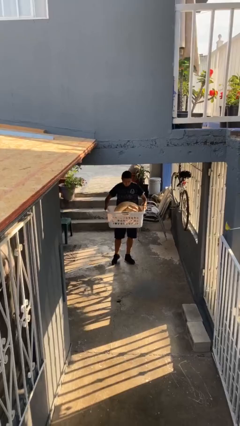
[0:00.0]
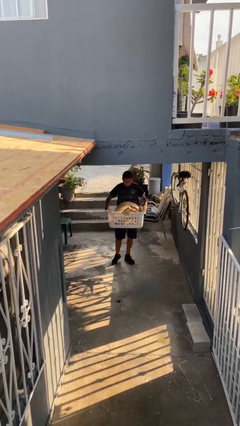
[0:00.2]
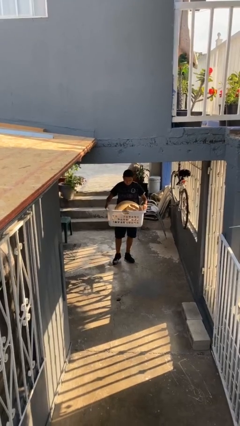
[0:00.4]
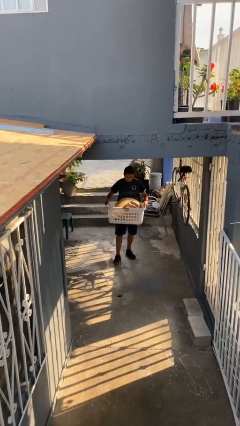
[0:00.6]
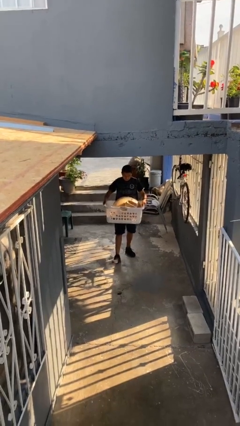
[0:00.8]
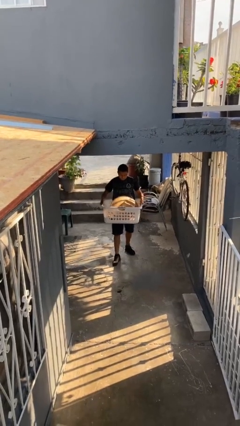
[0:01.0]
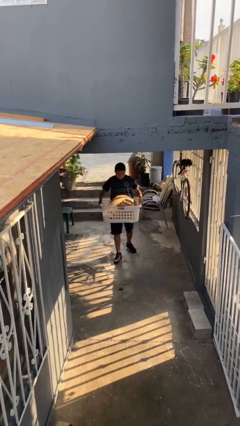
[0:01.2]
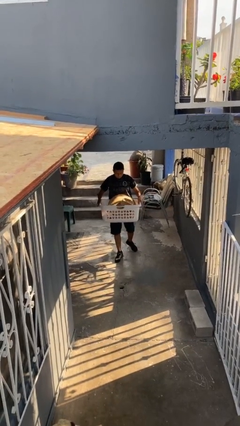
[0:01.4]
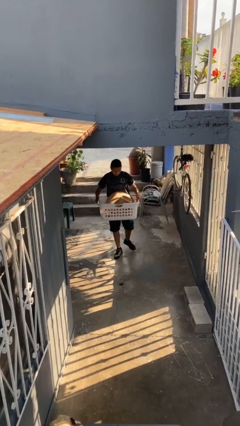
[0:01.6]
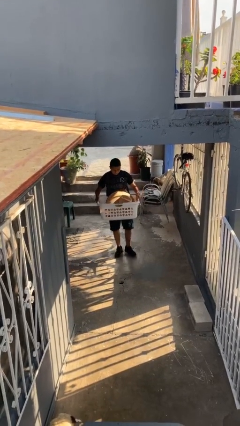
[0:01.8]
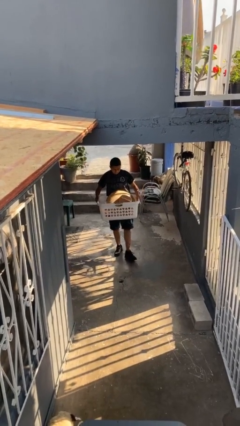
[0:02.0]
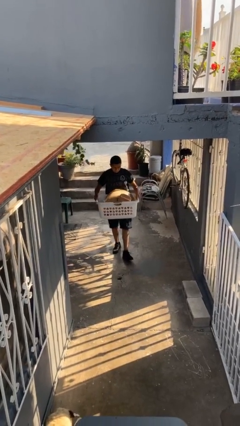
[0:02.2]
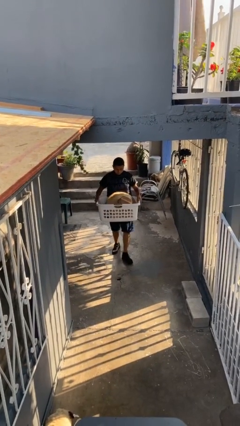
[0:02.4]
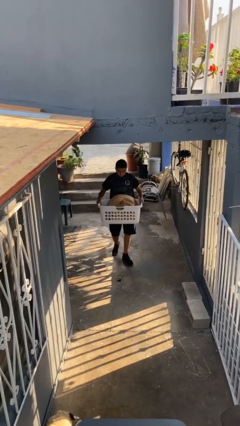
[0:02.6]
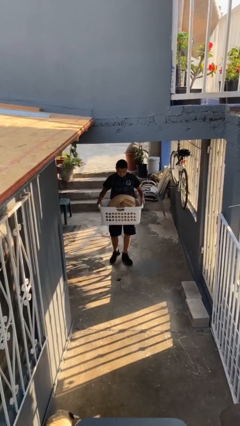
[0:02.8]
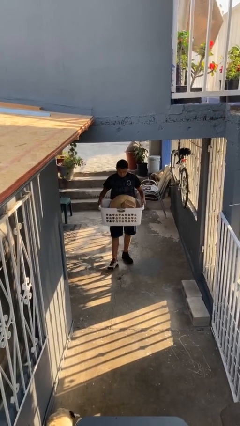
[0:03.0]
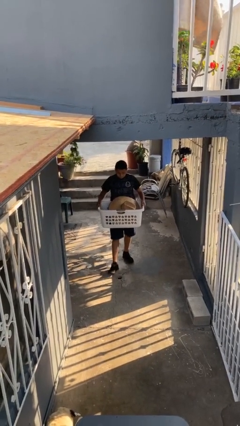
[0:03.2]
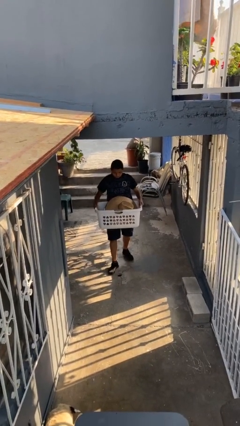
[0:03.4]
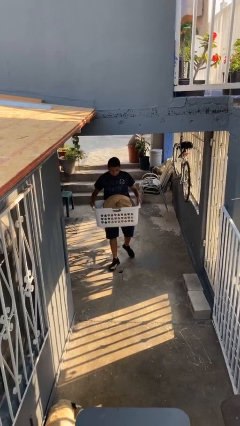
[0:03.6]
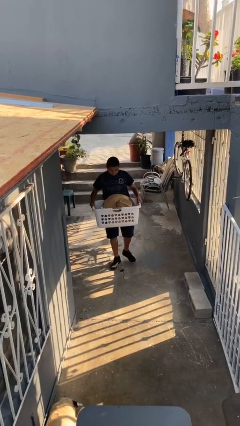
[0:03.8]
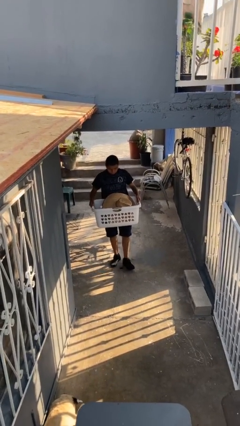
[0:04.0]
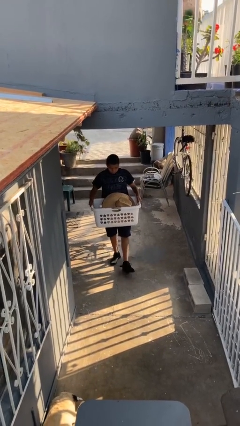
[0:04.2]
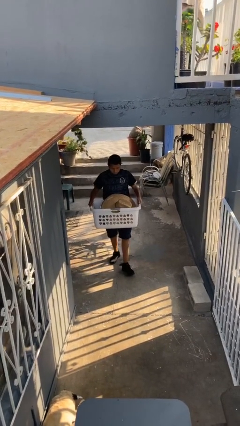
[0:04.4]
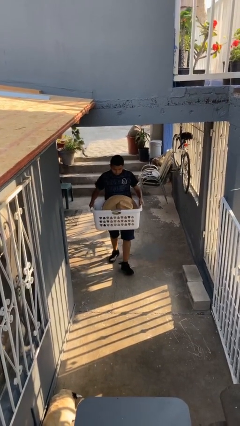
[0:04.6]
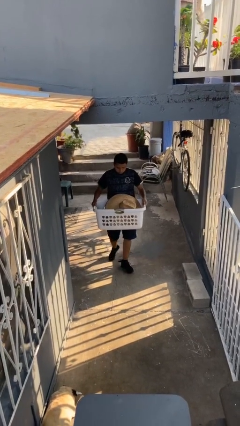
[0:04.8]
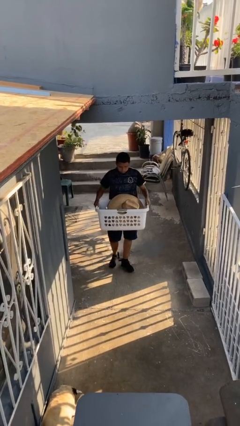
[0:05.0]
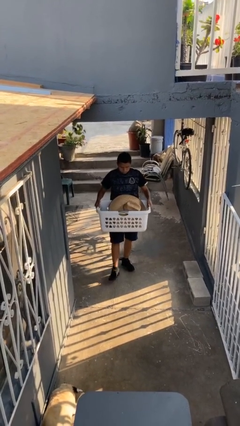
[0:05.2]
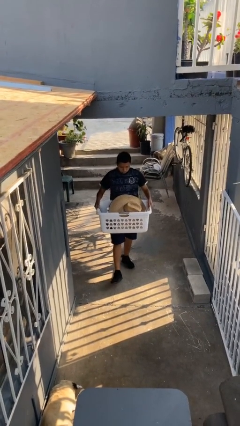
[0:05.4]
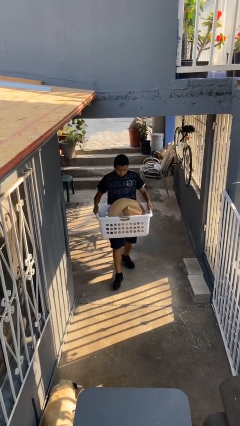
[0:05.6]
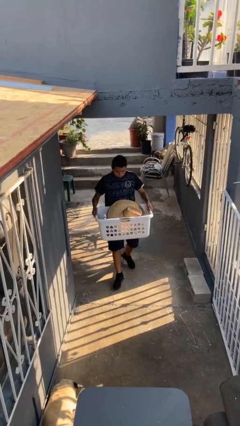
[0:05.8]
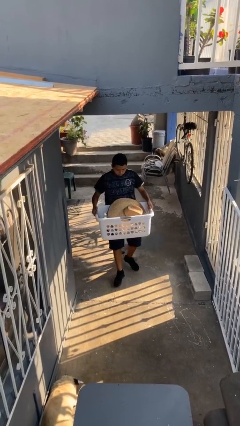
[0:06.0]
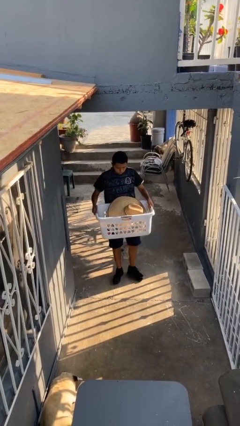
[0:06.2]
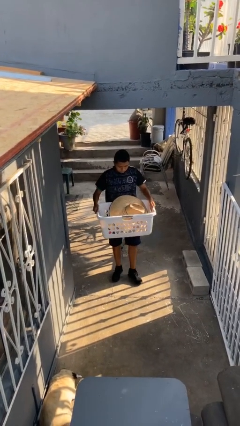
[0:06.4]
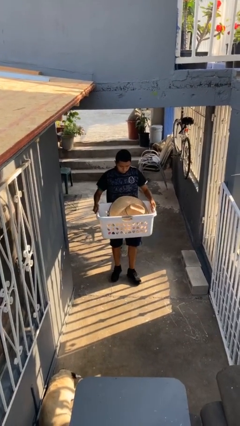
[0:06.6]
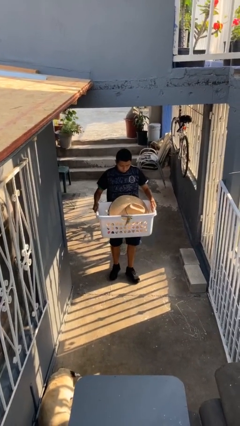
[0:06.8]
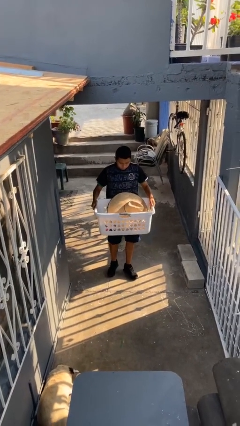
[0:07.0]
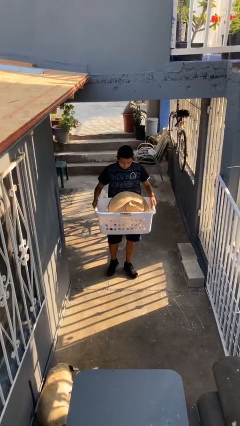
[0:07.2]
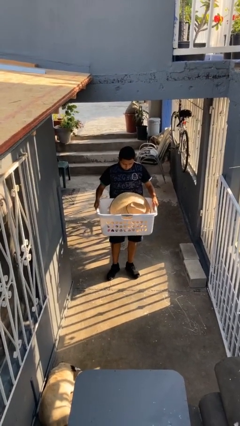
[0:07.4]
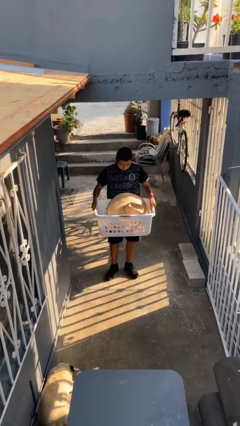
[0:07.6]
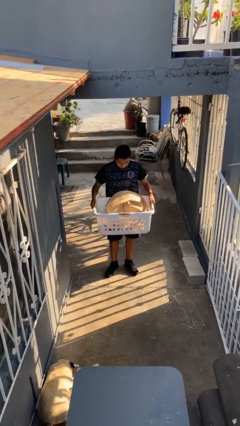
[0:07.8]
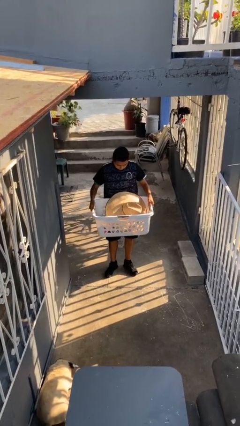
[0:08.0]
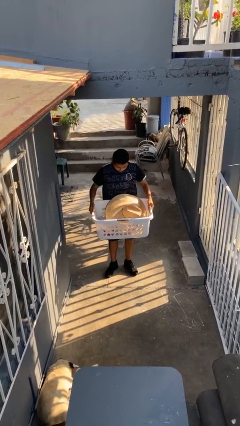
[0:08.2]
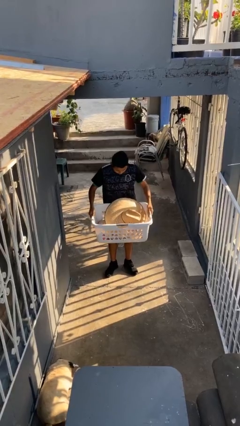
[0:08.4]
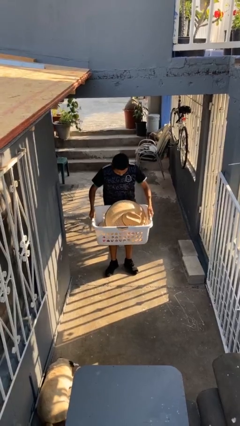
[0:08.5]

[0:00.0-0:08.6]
person carries heavy object

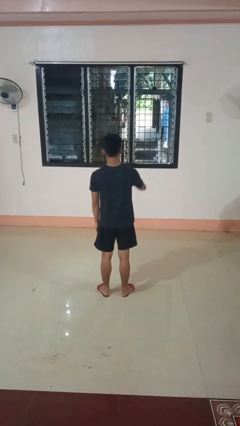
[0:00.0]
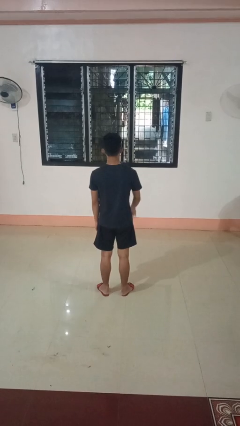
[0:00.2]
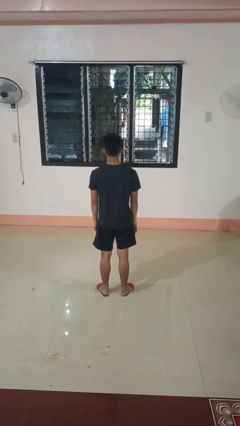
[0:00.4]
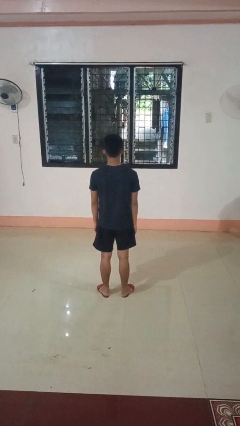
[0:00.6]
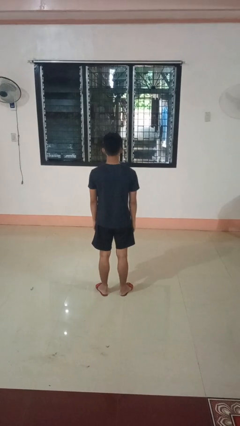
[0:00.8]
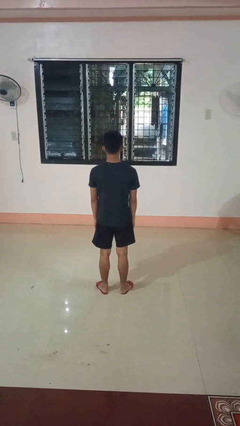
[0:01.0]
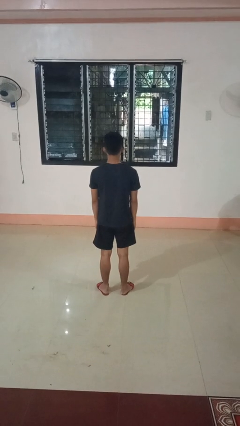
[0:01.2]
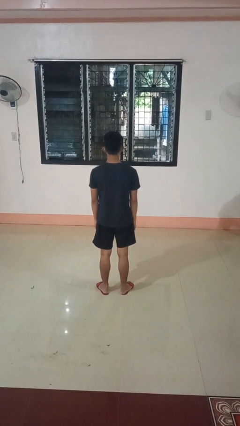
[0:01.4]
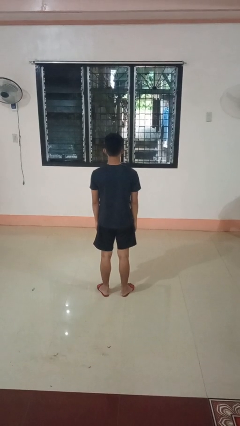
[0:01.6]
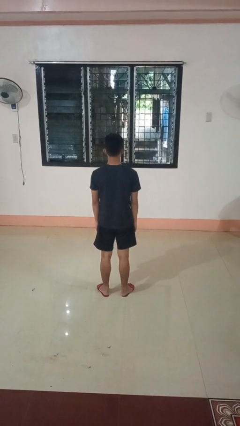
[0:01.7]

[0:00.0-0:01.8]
person gestures swipe down

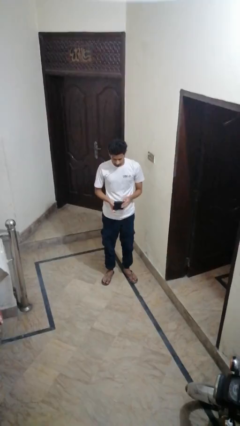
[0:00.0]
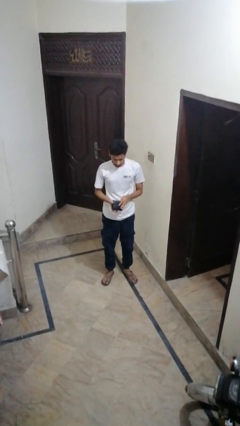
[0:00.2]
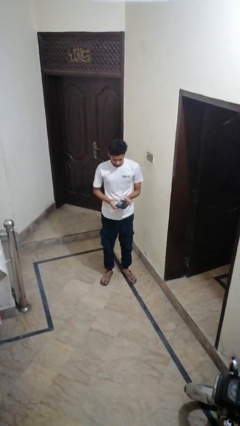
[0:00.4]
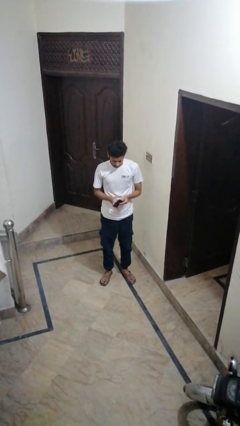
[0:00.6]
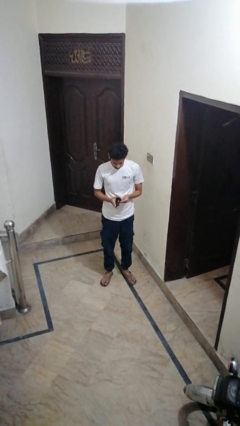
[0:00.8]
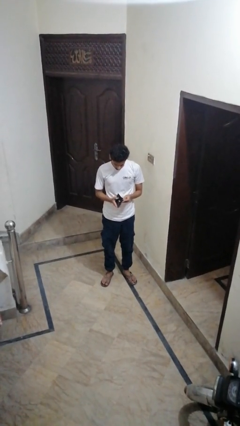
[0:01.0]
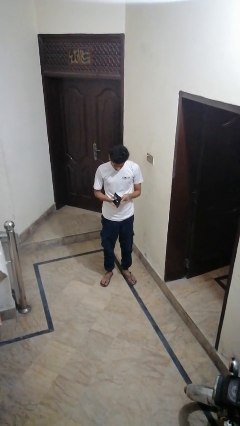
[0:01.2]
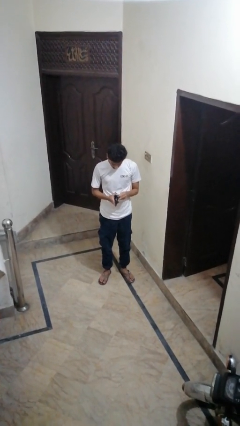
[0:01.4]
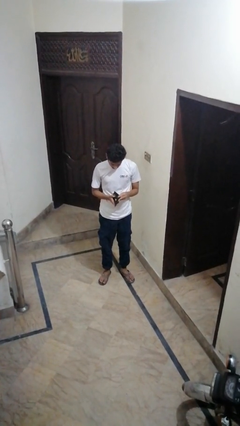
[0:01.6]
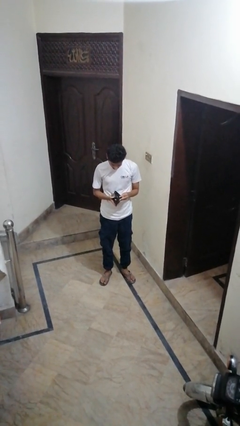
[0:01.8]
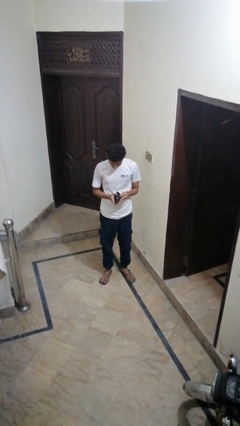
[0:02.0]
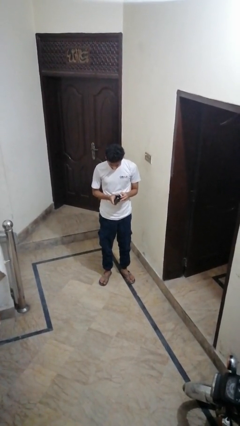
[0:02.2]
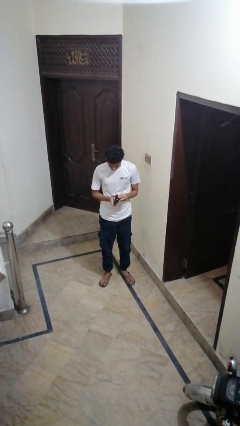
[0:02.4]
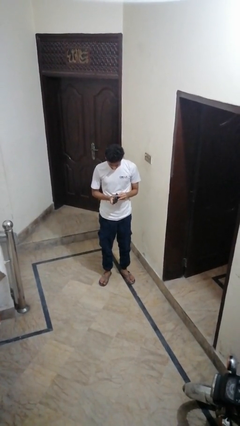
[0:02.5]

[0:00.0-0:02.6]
person searches in purse

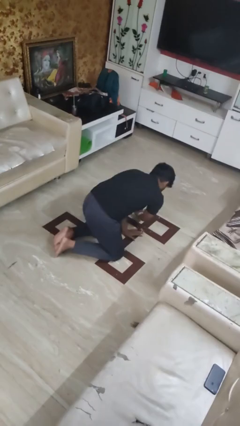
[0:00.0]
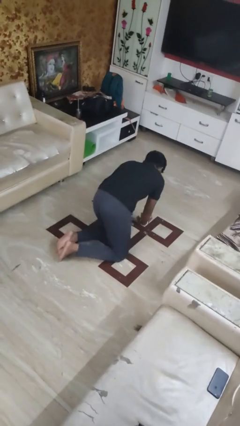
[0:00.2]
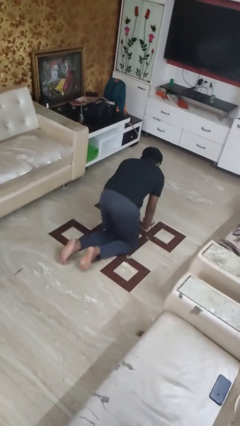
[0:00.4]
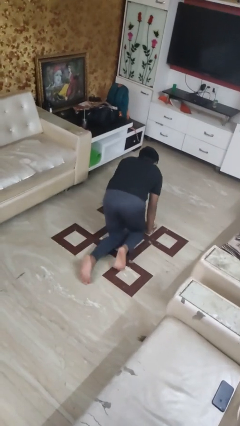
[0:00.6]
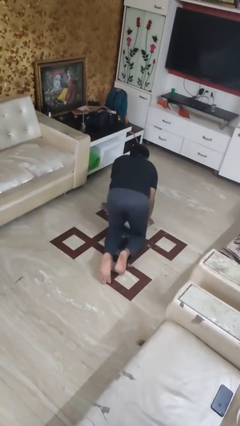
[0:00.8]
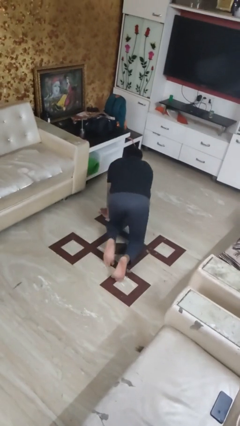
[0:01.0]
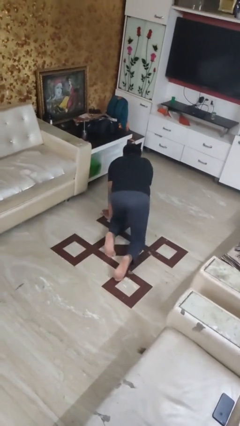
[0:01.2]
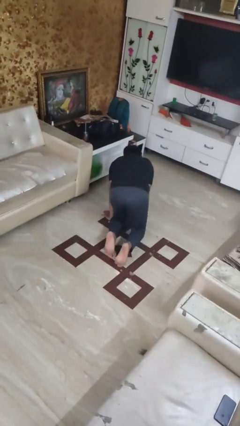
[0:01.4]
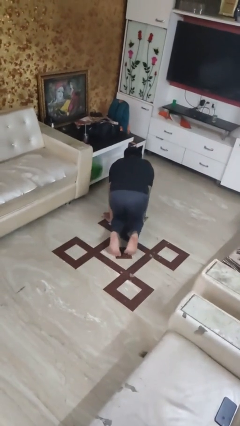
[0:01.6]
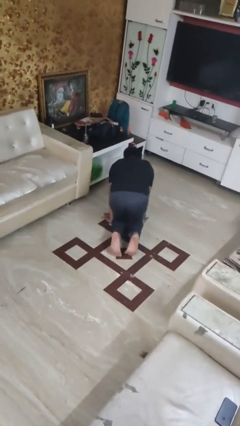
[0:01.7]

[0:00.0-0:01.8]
person crawls

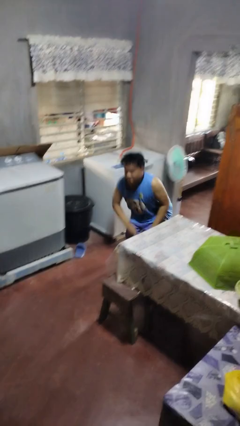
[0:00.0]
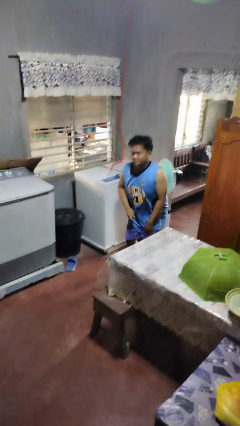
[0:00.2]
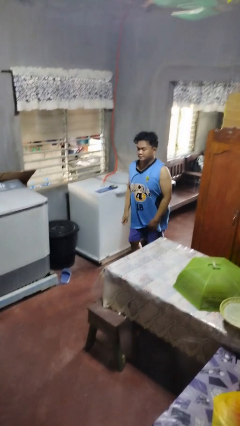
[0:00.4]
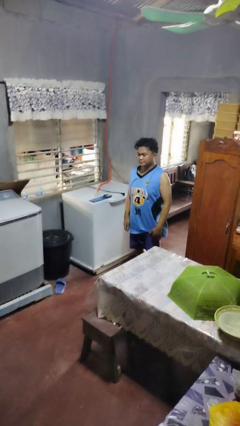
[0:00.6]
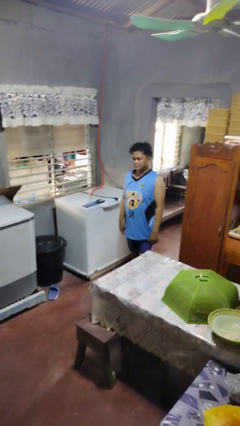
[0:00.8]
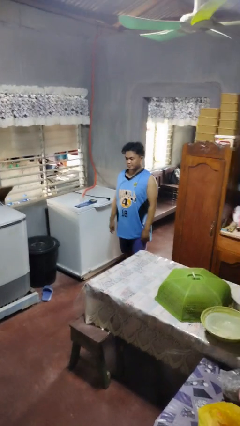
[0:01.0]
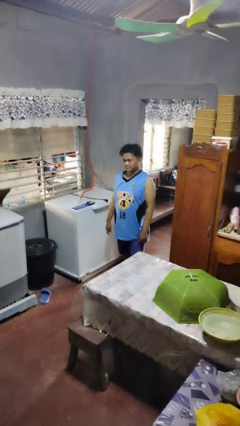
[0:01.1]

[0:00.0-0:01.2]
person stands up from floor

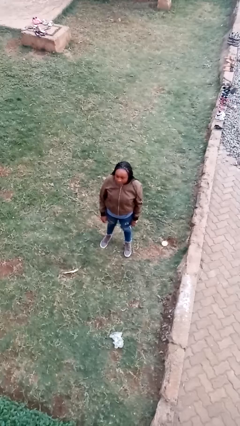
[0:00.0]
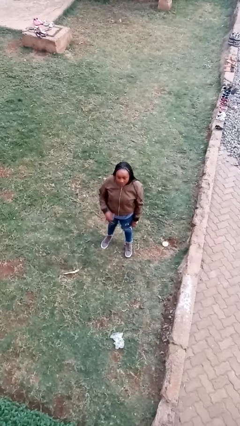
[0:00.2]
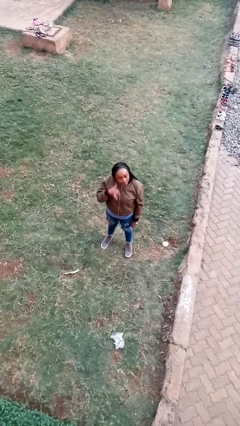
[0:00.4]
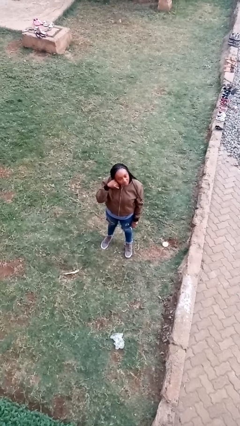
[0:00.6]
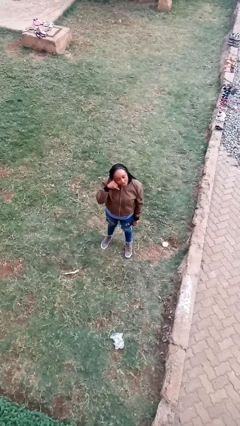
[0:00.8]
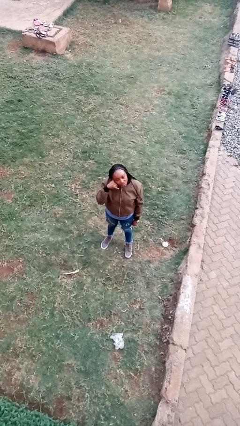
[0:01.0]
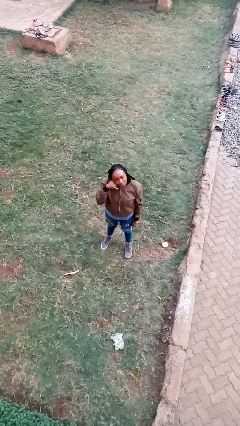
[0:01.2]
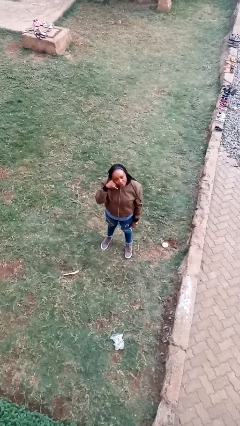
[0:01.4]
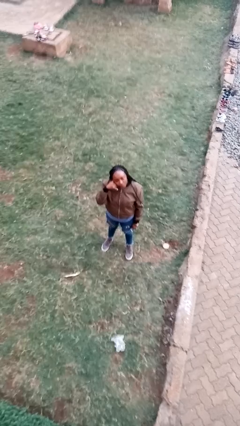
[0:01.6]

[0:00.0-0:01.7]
person gestures call me
